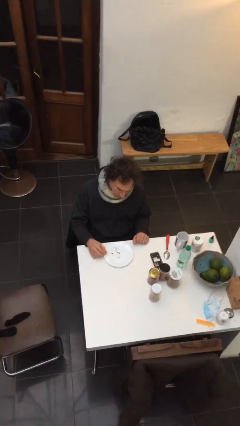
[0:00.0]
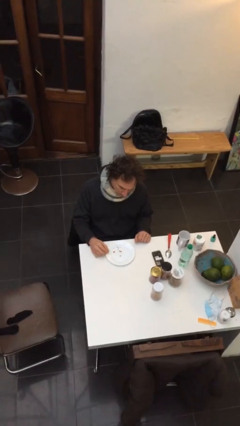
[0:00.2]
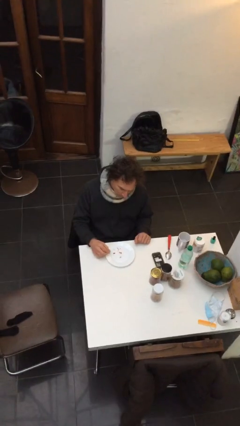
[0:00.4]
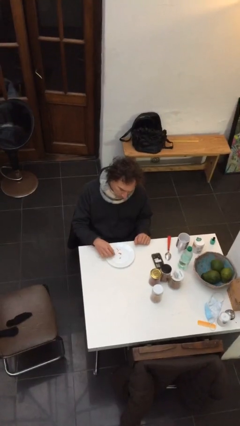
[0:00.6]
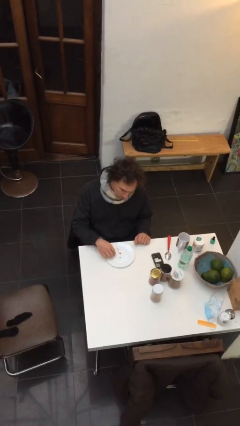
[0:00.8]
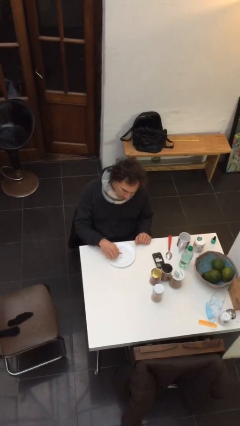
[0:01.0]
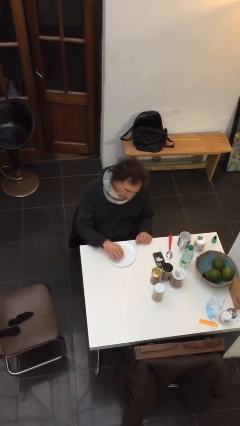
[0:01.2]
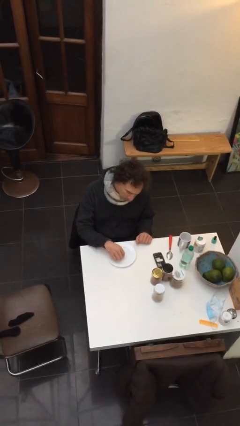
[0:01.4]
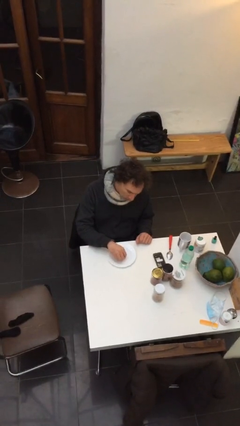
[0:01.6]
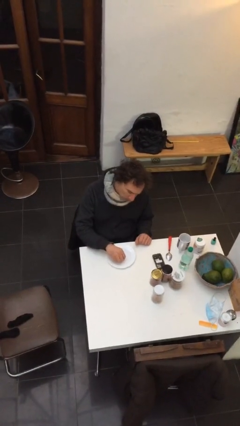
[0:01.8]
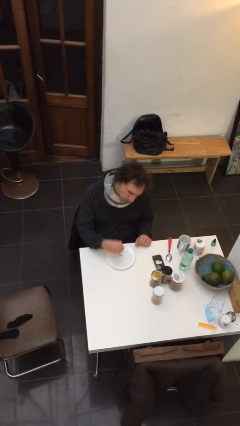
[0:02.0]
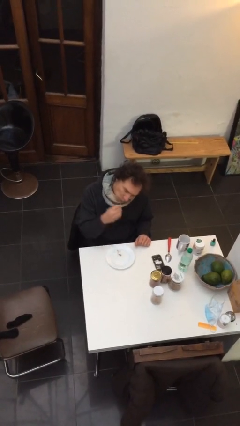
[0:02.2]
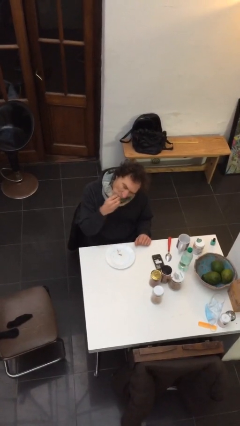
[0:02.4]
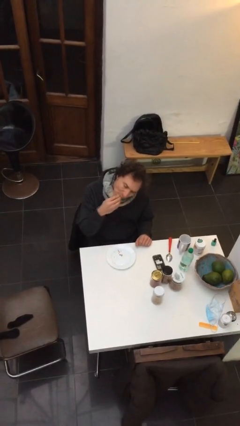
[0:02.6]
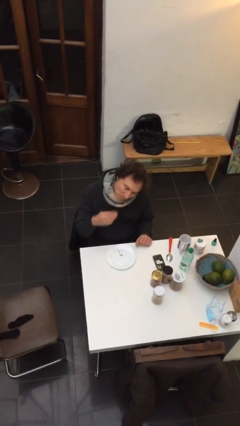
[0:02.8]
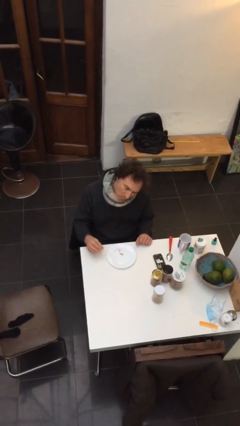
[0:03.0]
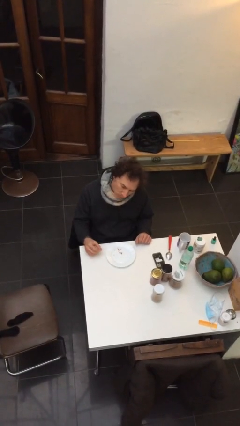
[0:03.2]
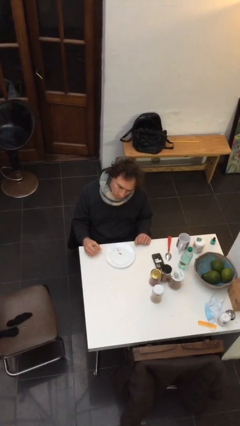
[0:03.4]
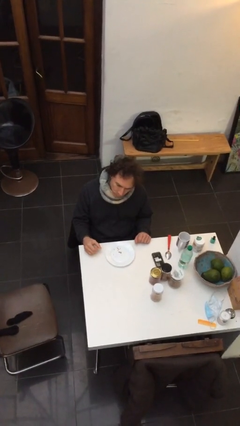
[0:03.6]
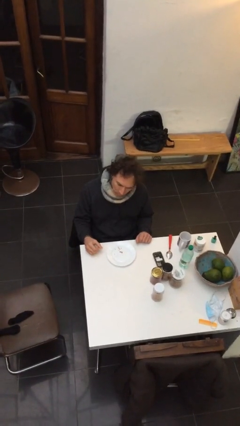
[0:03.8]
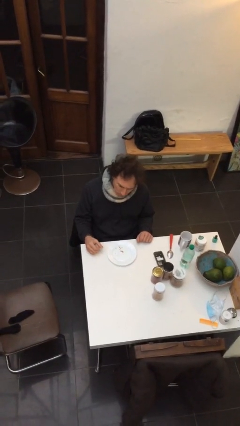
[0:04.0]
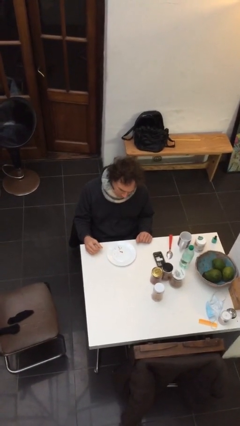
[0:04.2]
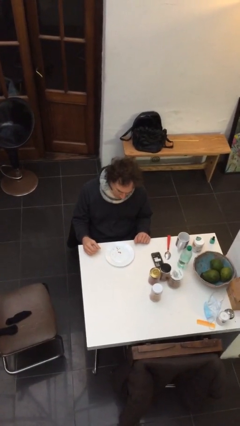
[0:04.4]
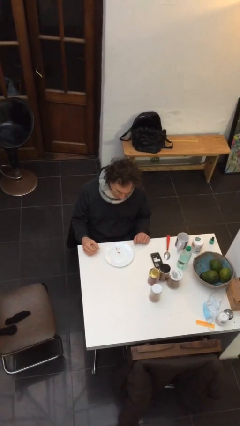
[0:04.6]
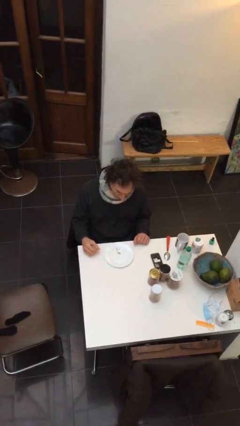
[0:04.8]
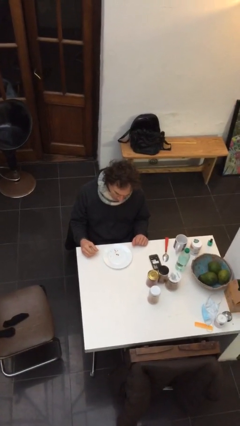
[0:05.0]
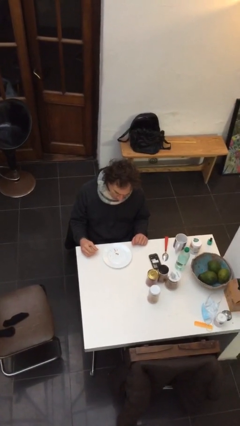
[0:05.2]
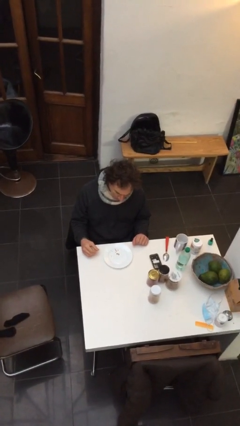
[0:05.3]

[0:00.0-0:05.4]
person eats with hands

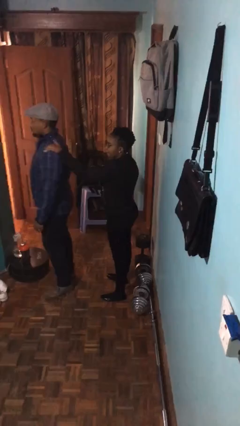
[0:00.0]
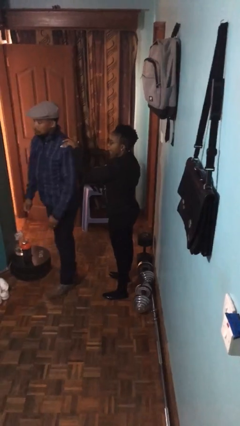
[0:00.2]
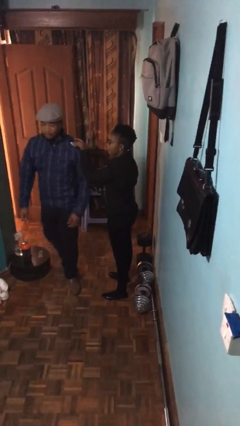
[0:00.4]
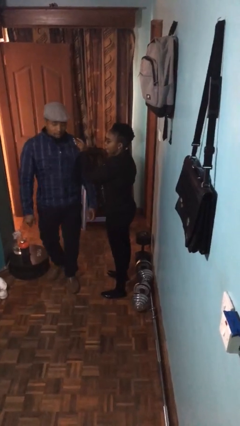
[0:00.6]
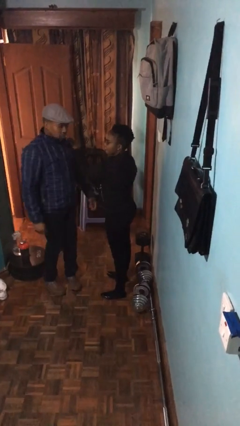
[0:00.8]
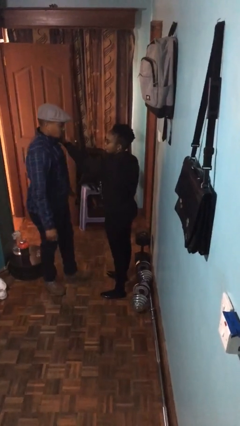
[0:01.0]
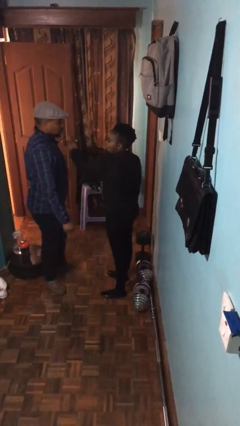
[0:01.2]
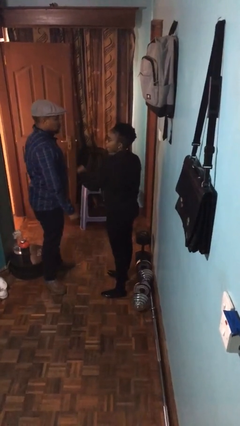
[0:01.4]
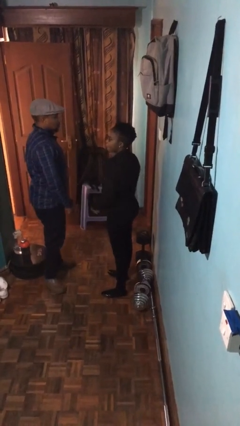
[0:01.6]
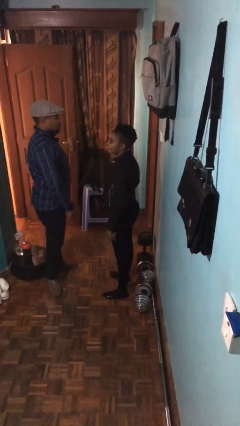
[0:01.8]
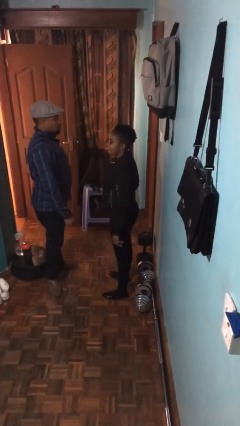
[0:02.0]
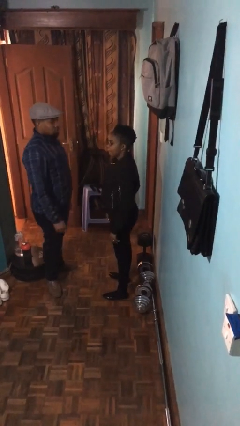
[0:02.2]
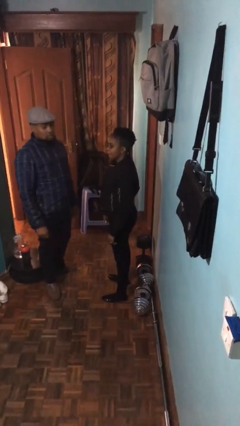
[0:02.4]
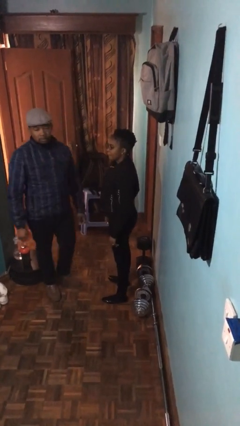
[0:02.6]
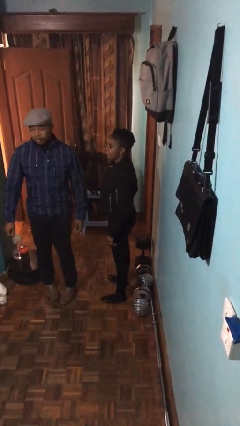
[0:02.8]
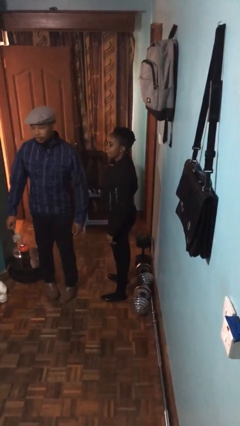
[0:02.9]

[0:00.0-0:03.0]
person spins person around

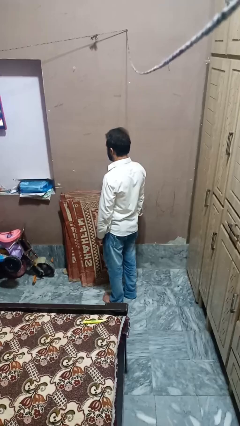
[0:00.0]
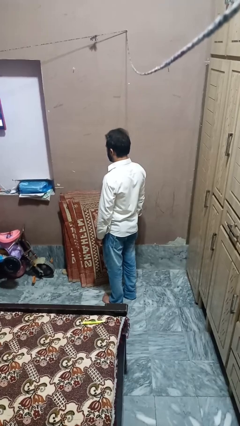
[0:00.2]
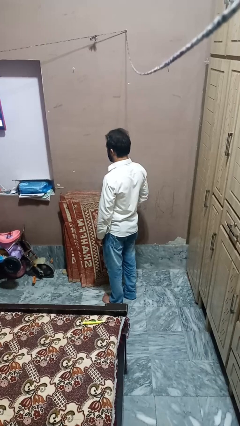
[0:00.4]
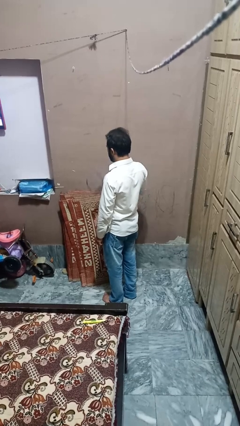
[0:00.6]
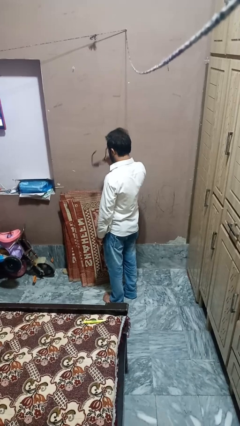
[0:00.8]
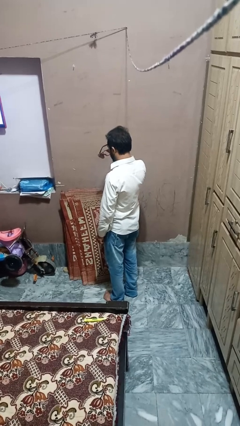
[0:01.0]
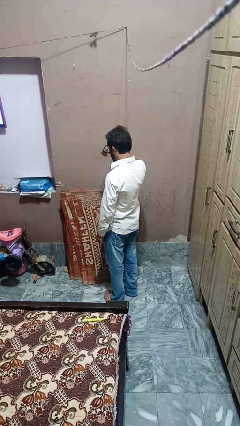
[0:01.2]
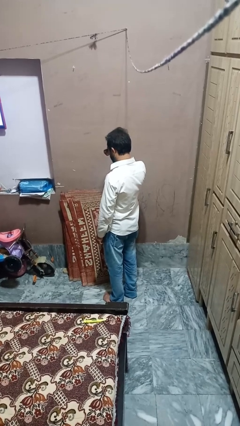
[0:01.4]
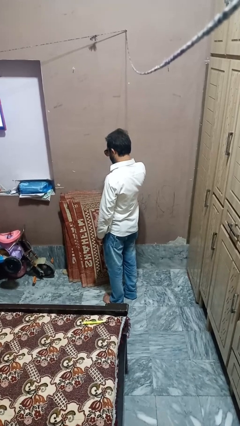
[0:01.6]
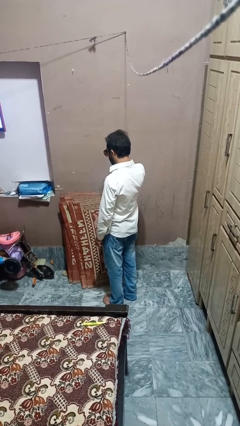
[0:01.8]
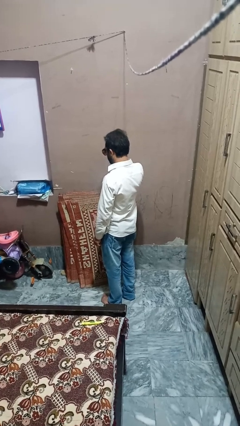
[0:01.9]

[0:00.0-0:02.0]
person puts on sunglasses

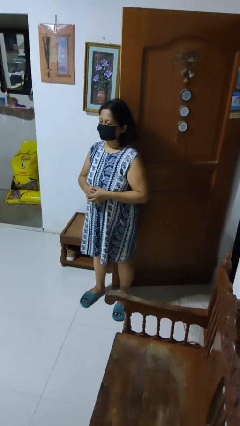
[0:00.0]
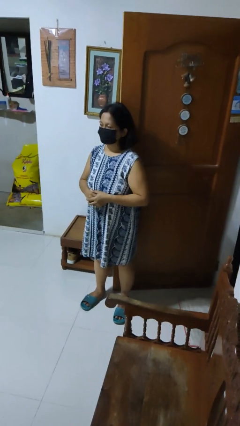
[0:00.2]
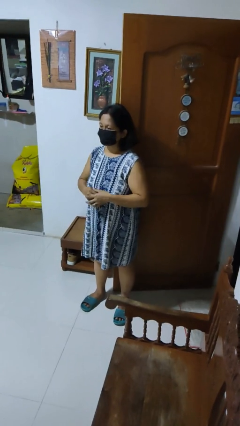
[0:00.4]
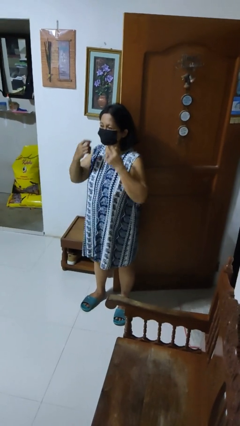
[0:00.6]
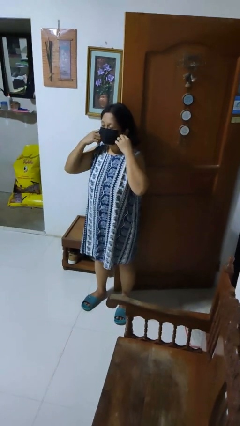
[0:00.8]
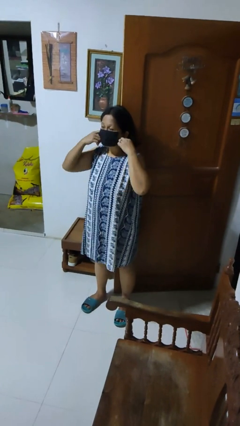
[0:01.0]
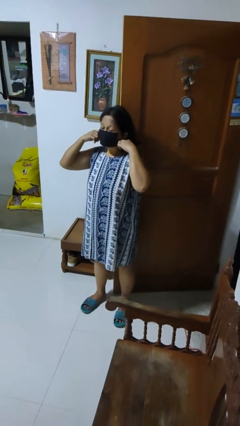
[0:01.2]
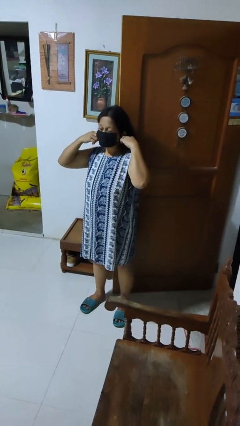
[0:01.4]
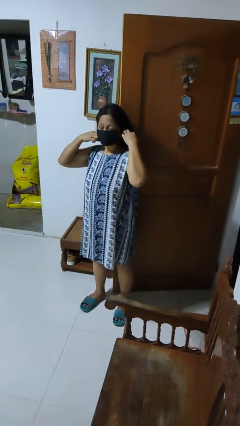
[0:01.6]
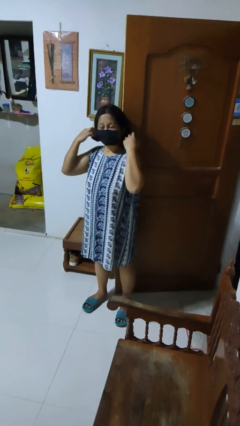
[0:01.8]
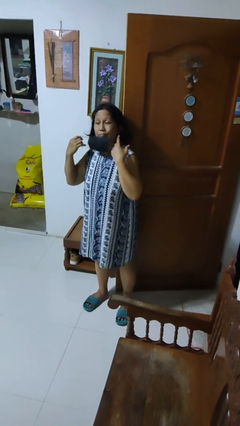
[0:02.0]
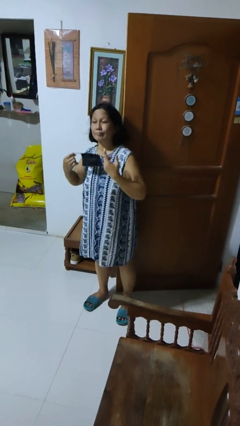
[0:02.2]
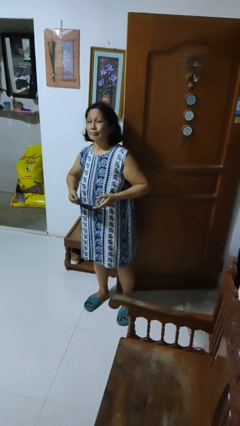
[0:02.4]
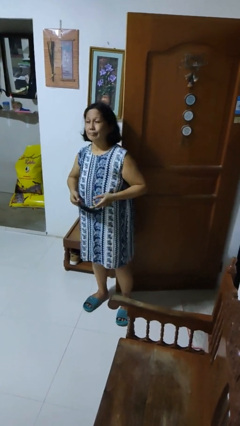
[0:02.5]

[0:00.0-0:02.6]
person takes off facemask

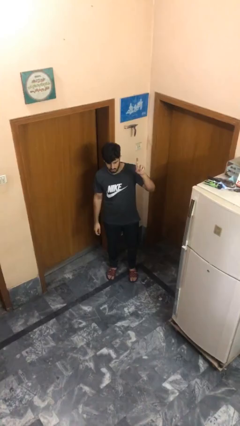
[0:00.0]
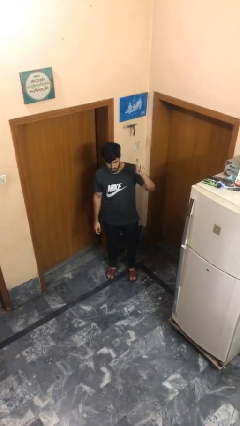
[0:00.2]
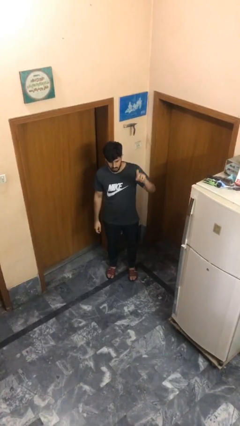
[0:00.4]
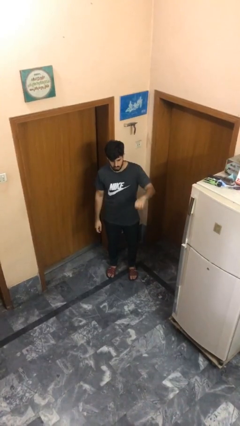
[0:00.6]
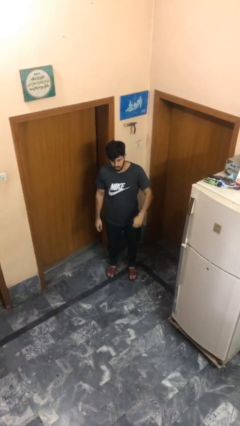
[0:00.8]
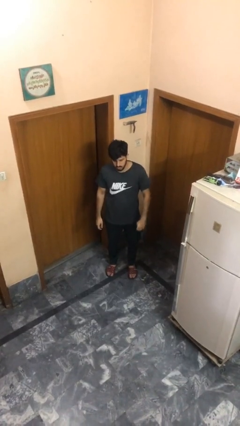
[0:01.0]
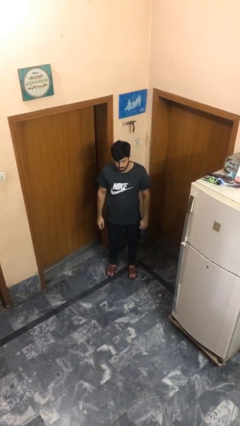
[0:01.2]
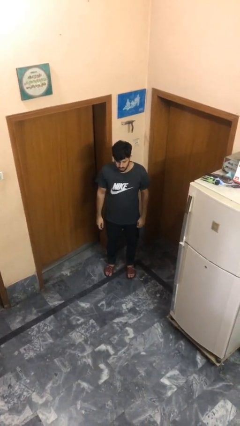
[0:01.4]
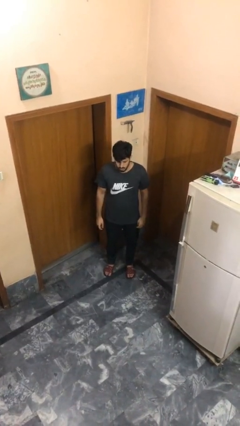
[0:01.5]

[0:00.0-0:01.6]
person gestures lower hand

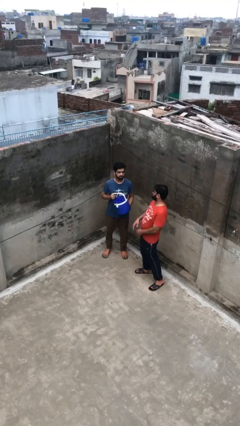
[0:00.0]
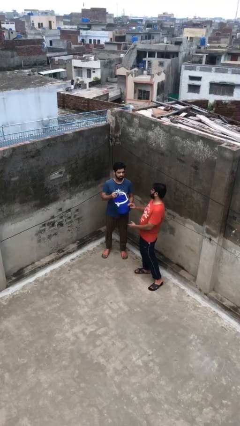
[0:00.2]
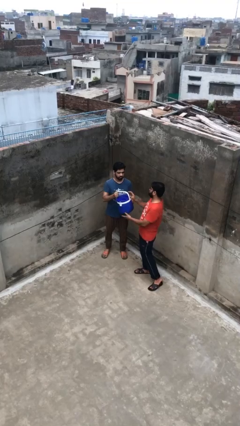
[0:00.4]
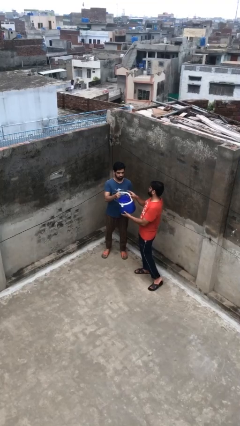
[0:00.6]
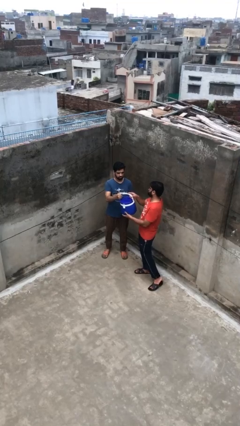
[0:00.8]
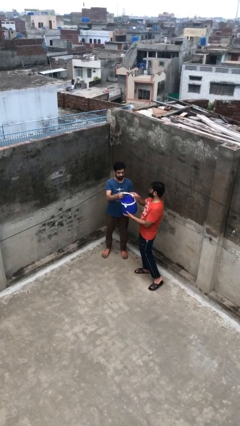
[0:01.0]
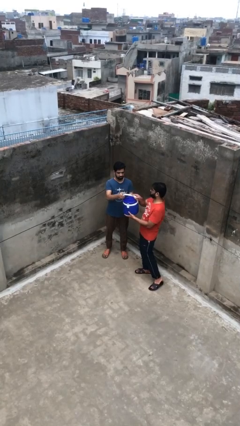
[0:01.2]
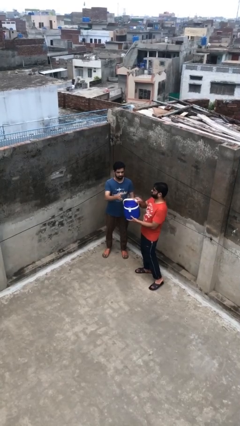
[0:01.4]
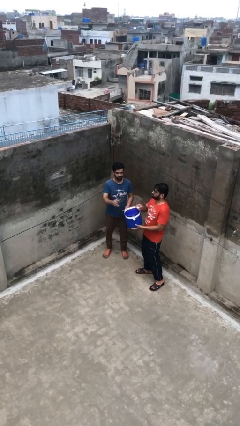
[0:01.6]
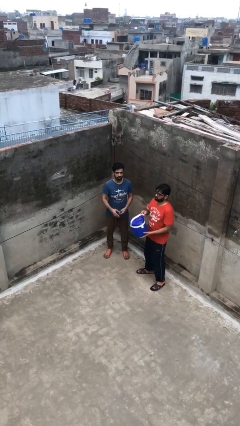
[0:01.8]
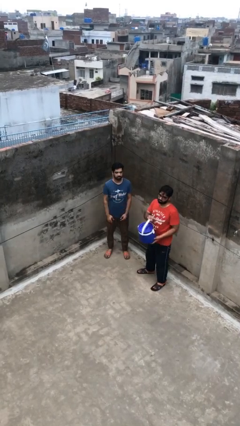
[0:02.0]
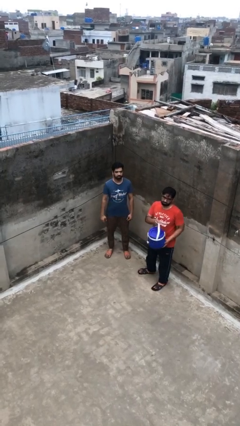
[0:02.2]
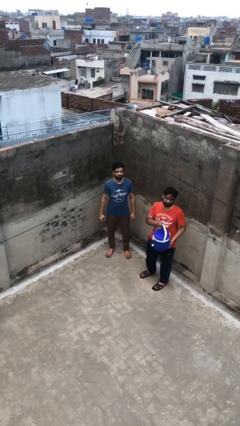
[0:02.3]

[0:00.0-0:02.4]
person transfers object to person
